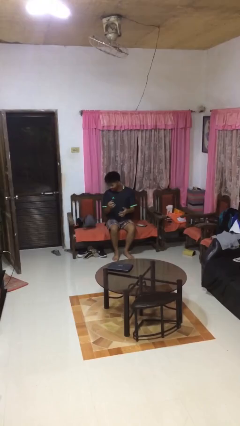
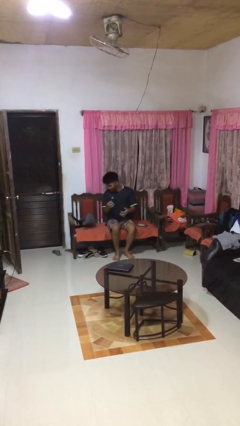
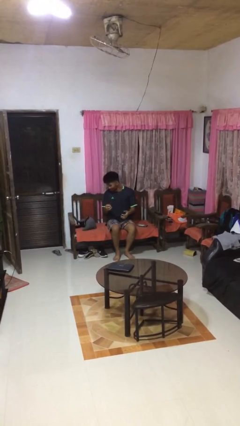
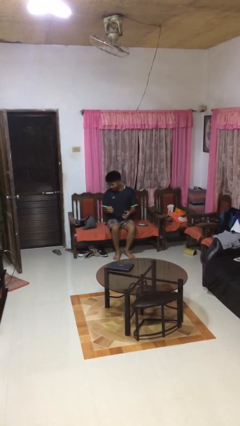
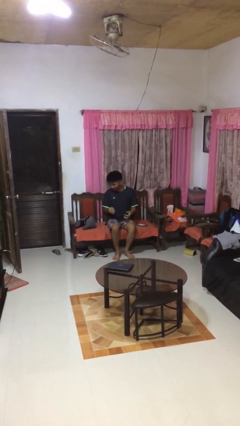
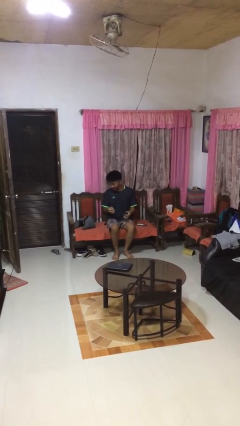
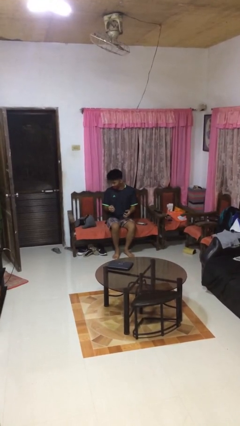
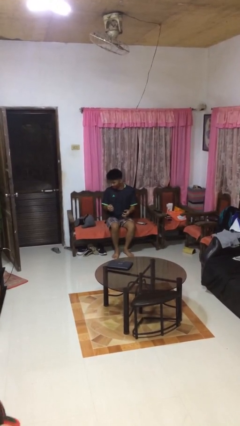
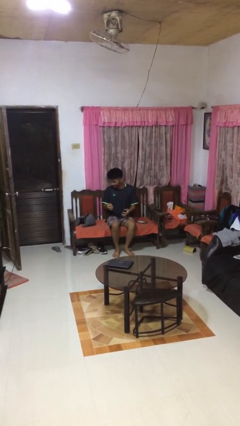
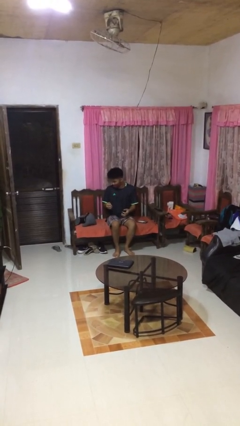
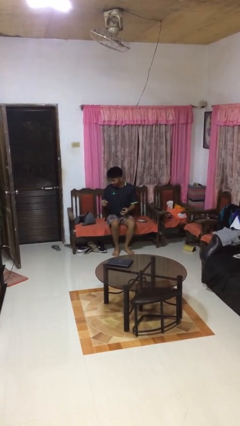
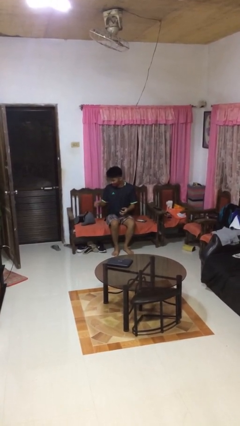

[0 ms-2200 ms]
person drops object

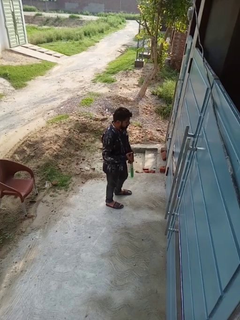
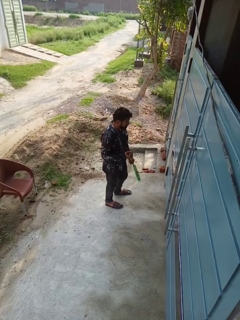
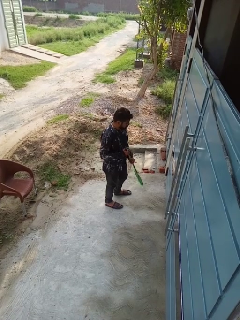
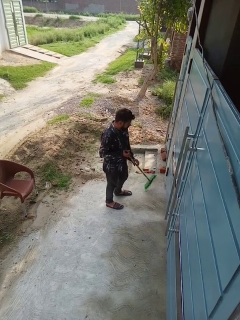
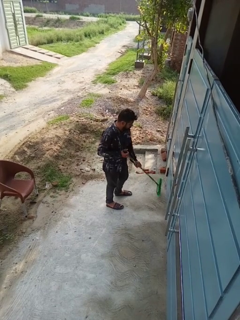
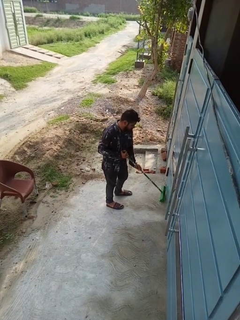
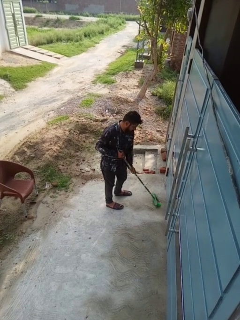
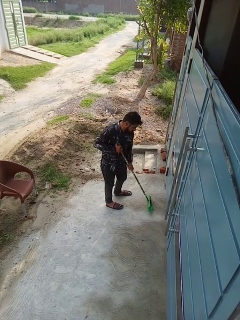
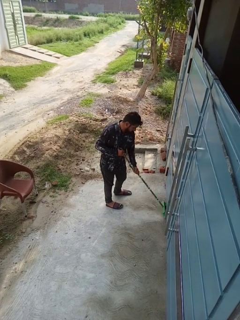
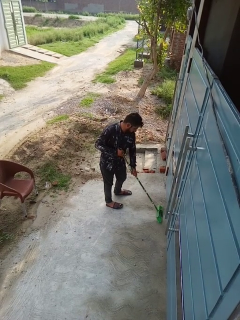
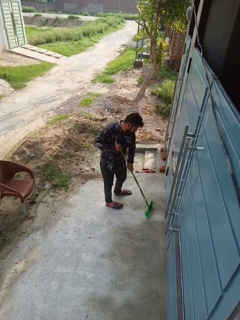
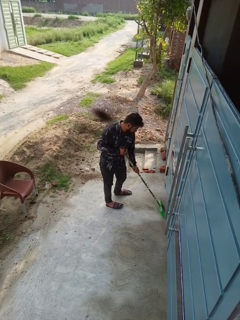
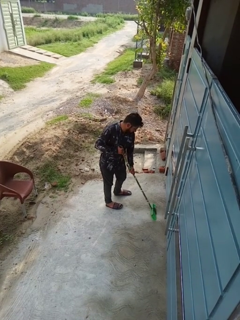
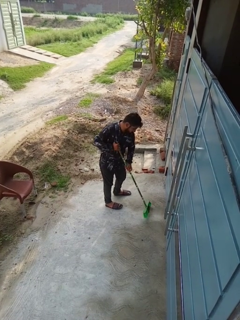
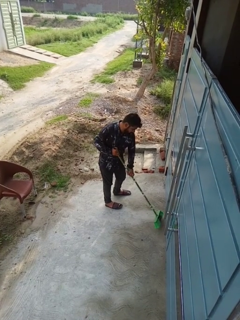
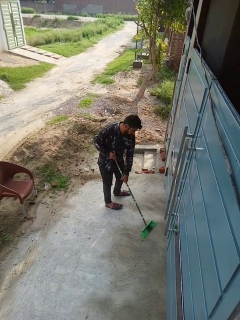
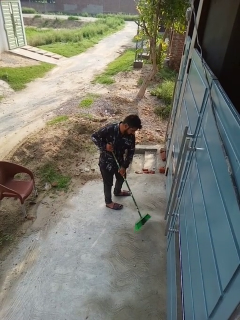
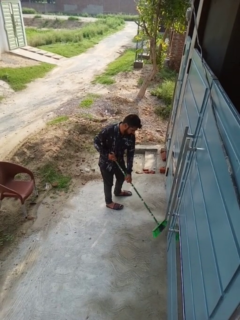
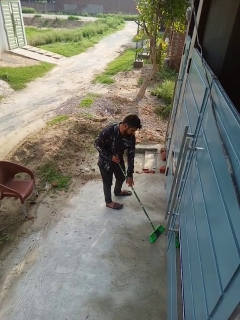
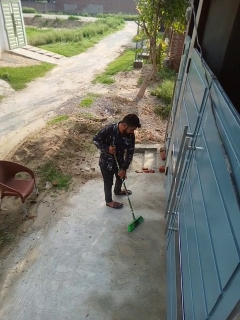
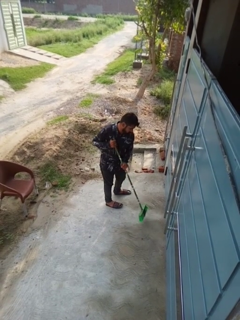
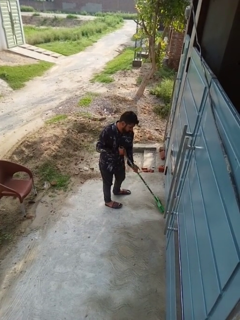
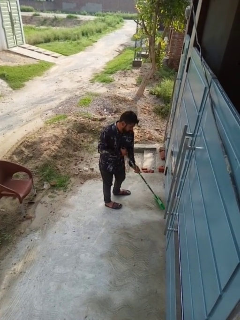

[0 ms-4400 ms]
person sweeps floor

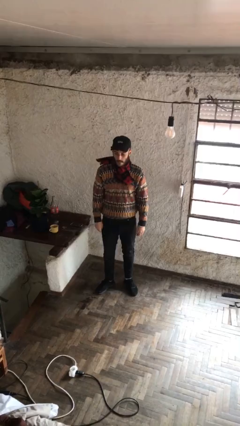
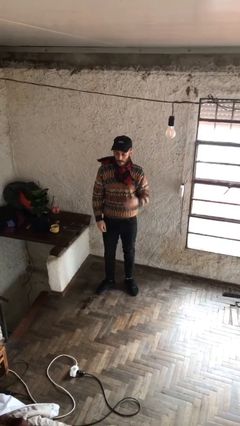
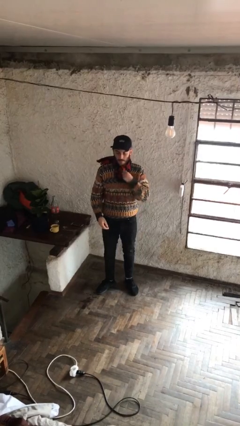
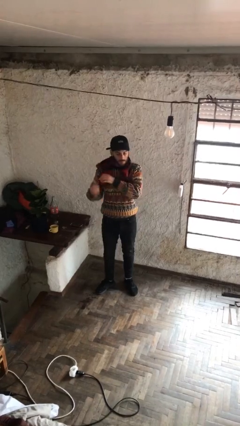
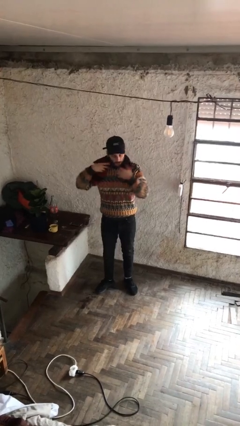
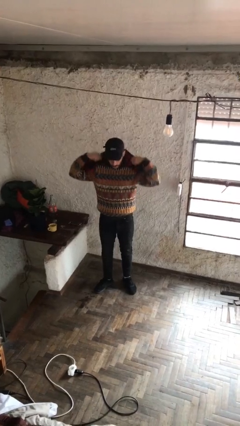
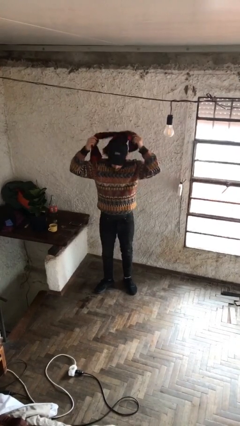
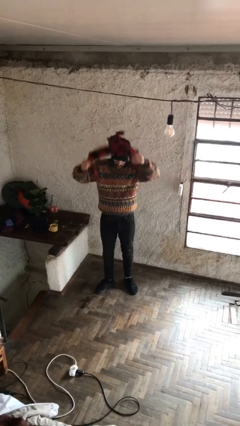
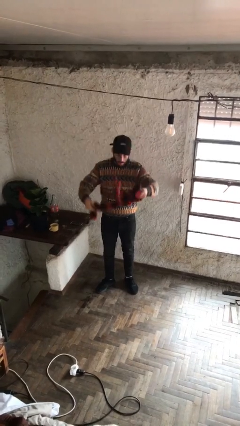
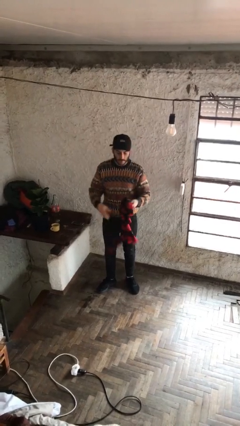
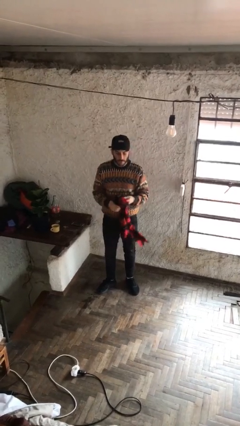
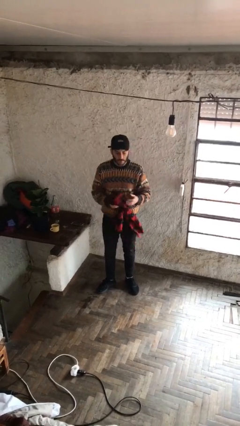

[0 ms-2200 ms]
person takes off scarf

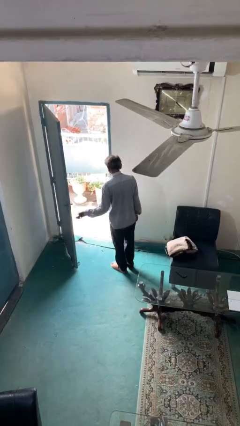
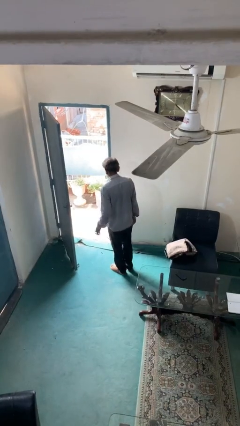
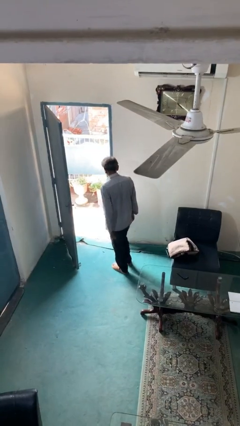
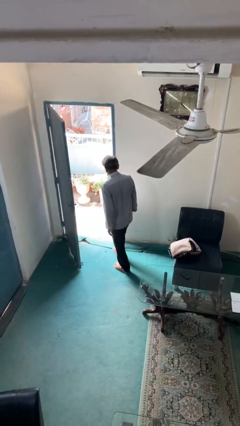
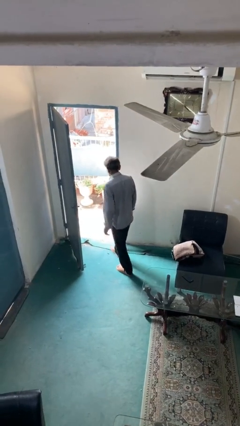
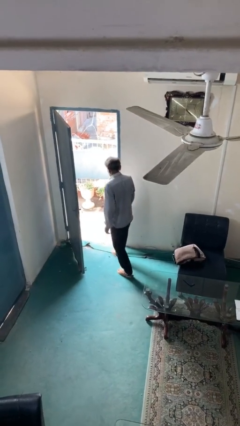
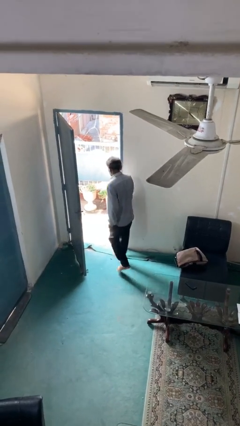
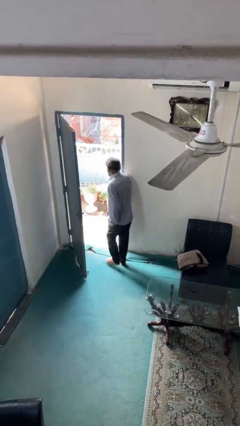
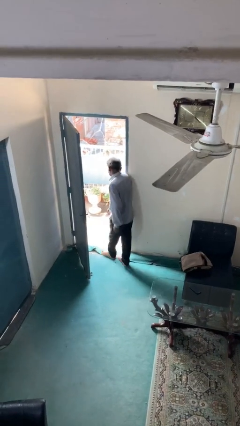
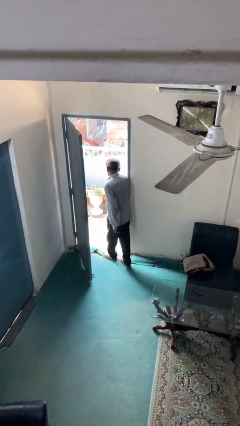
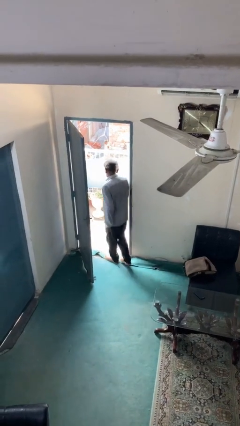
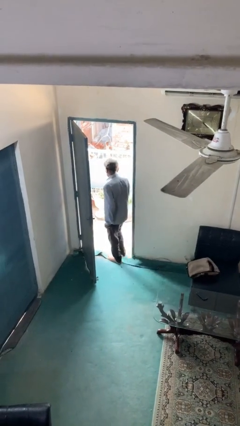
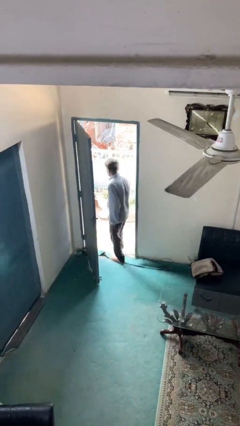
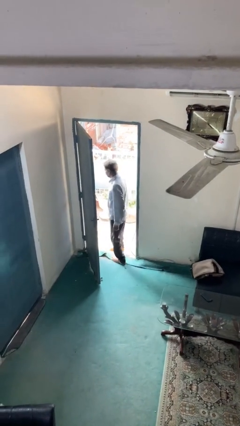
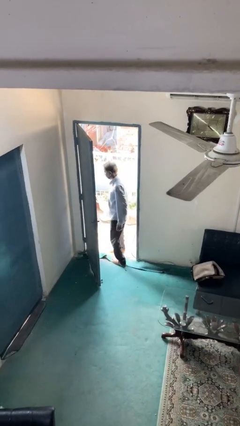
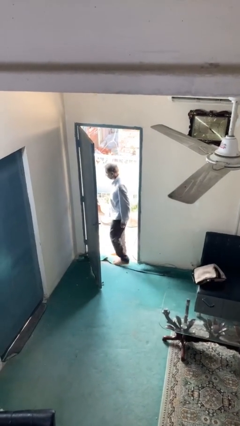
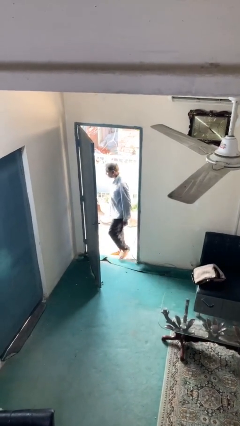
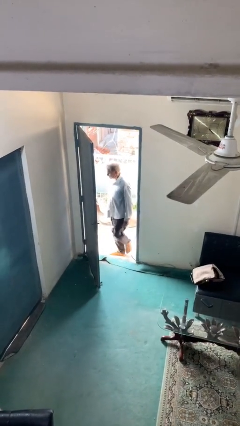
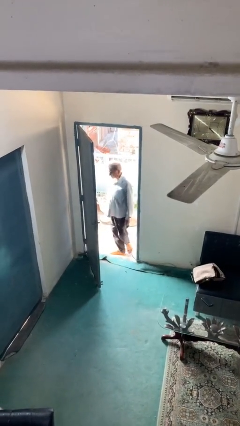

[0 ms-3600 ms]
person exits scene through structure

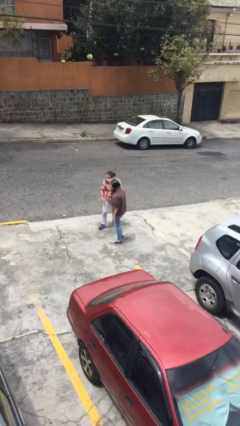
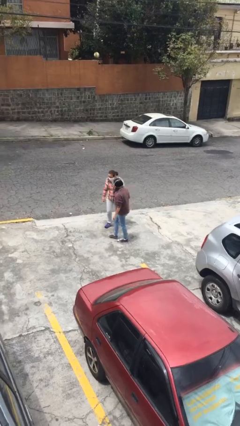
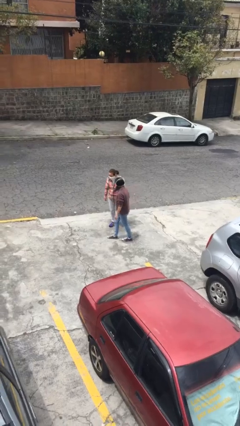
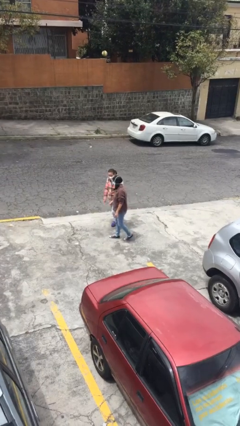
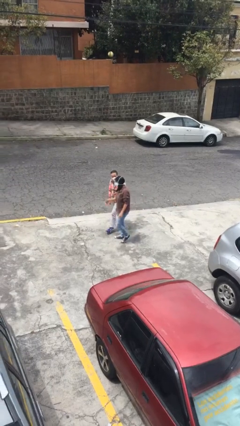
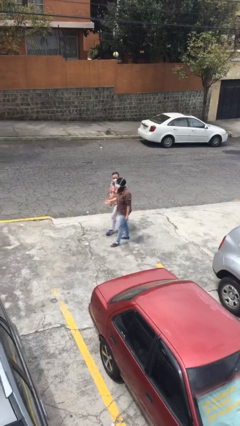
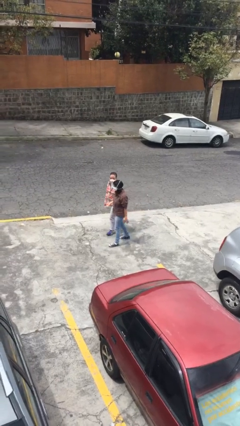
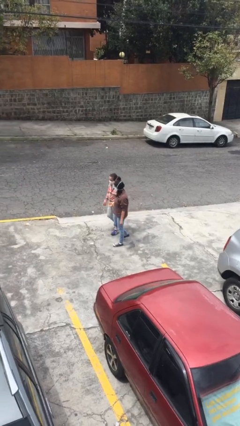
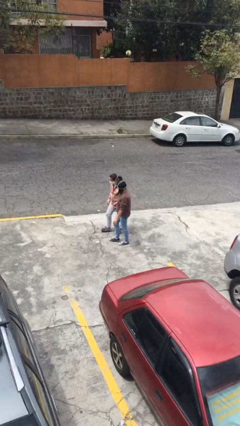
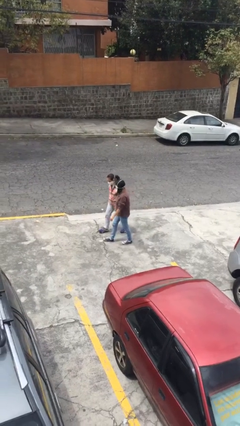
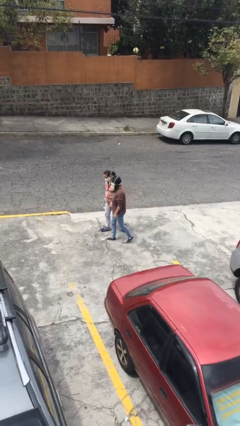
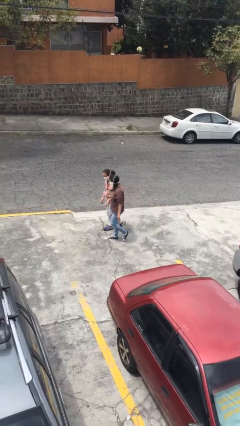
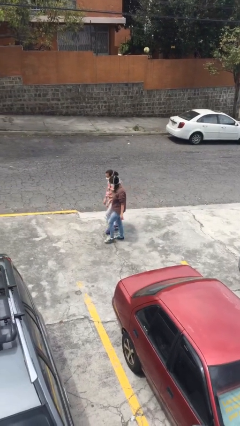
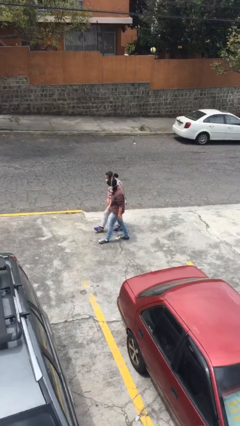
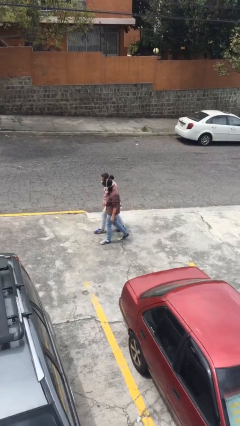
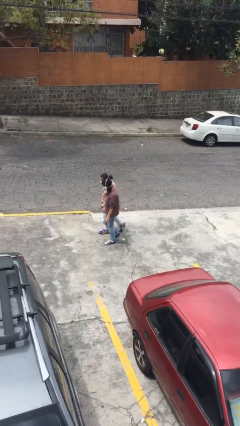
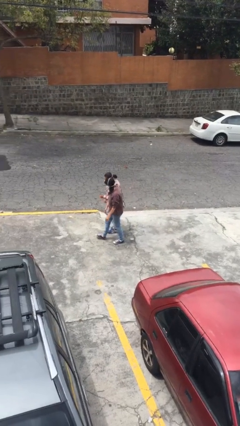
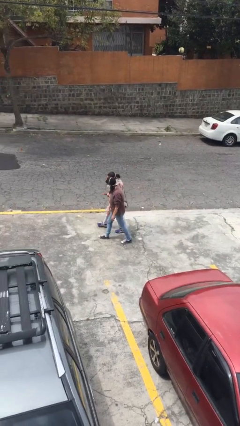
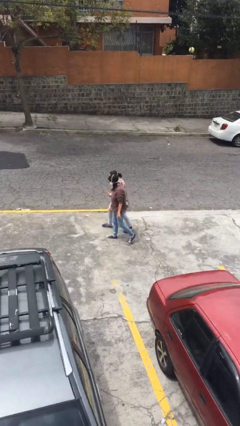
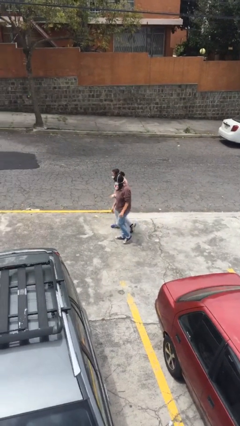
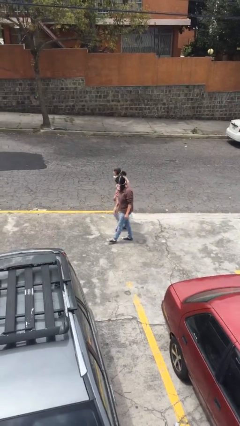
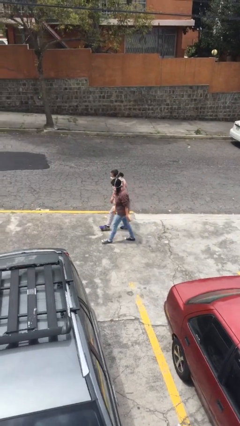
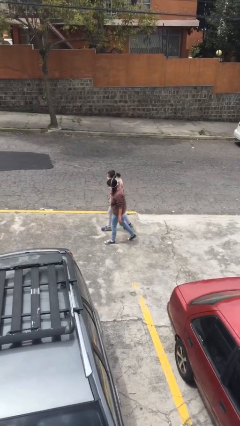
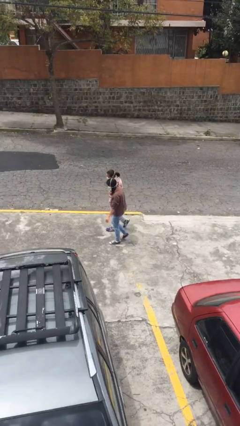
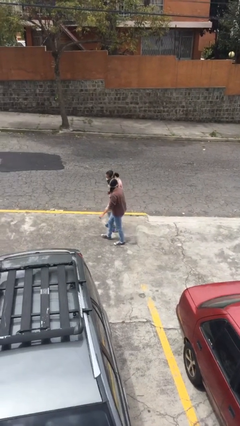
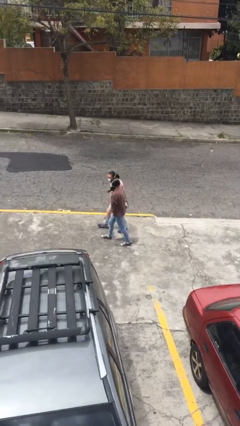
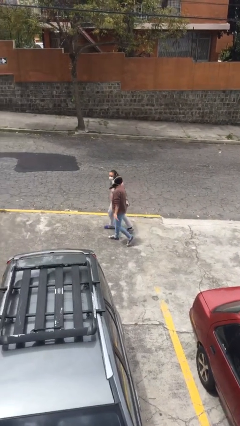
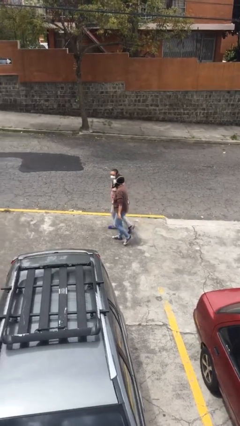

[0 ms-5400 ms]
person talks to person

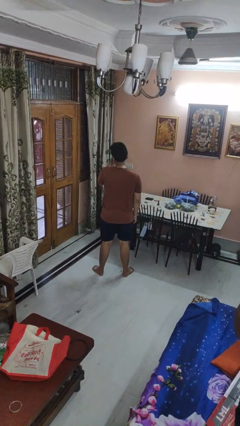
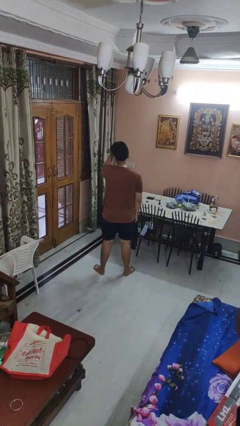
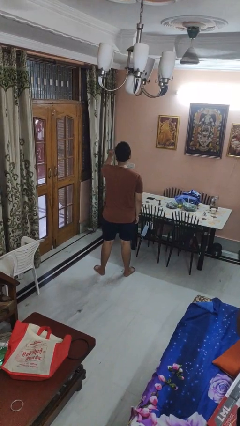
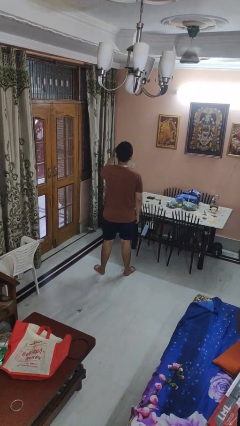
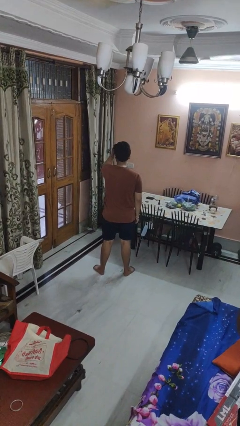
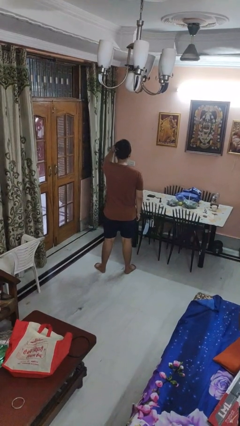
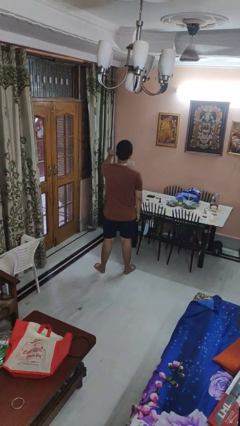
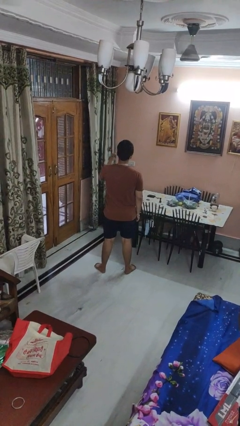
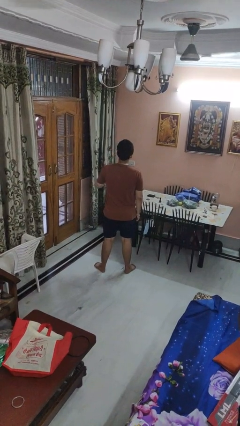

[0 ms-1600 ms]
person strokes hair
